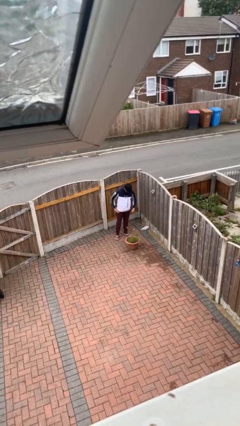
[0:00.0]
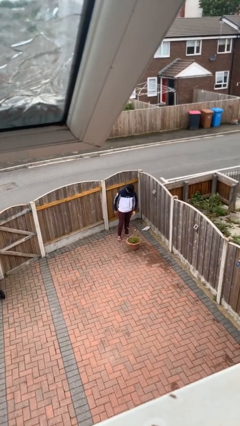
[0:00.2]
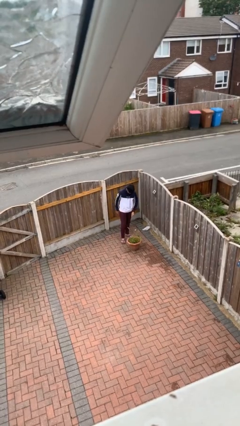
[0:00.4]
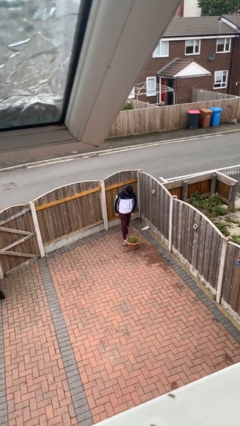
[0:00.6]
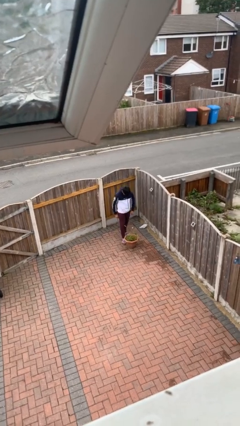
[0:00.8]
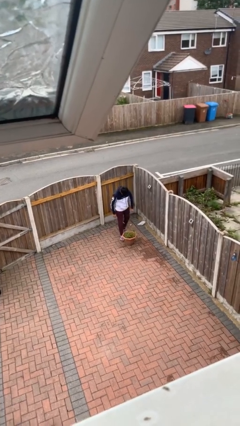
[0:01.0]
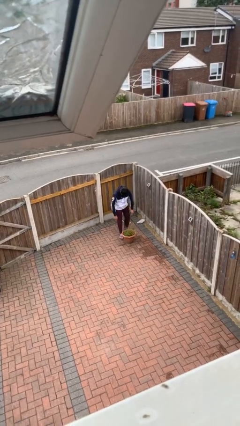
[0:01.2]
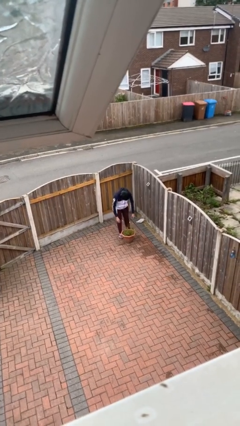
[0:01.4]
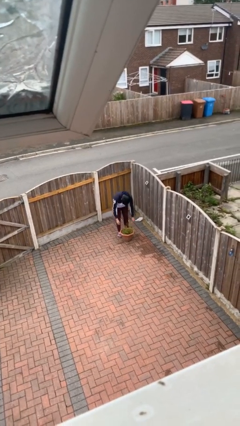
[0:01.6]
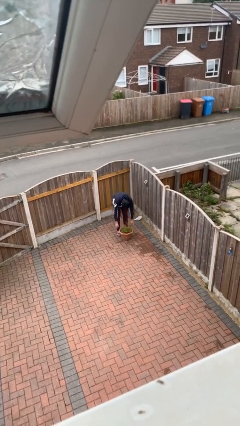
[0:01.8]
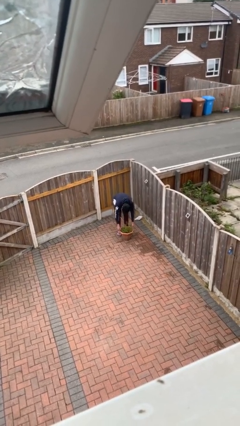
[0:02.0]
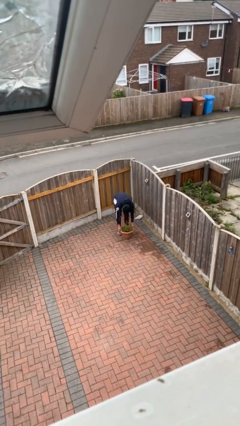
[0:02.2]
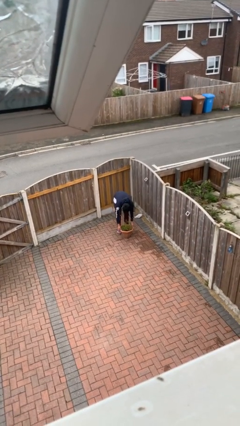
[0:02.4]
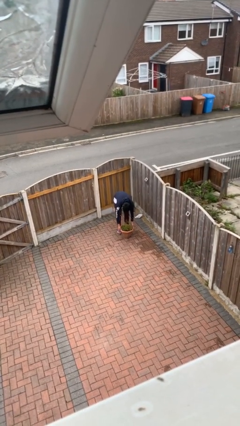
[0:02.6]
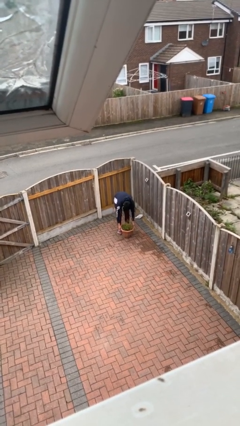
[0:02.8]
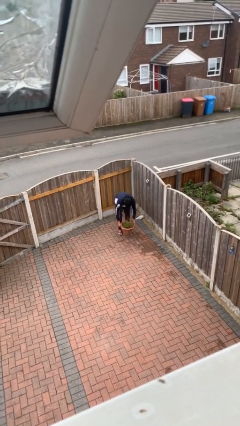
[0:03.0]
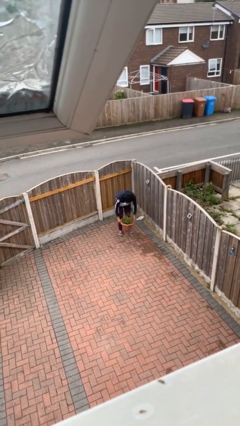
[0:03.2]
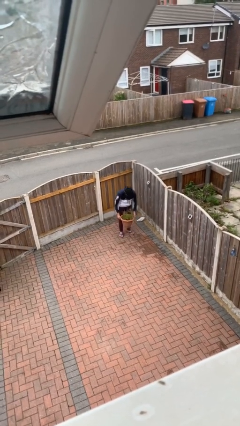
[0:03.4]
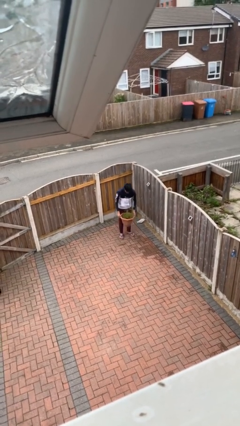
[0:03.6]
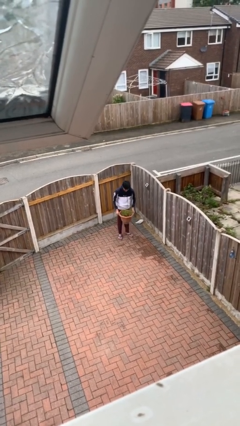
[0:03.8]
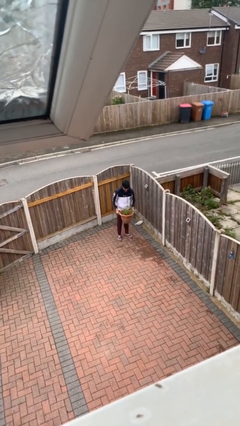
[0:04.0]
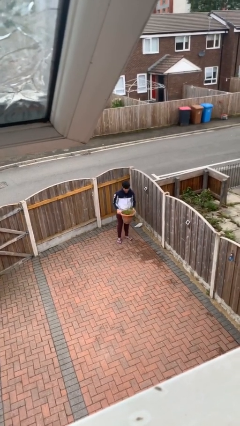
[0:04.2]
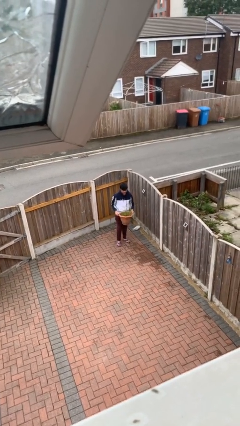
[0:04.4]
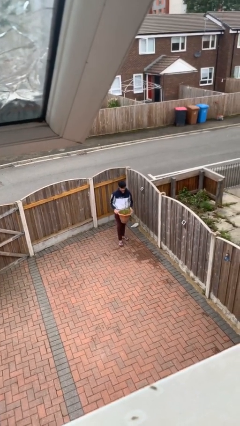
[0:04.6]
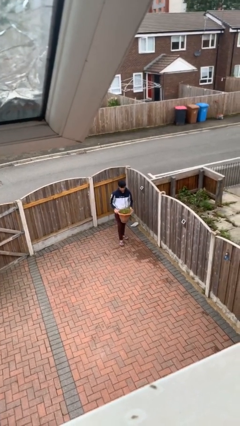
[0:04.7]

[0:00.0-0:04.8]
person picks up object from floor

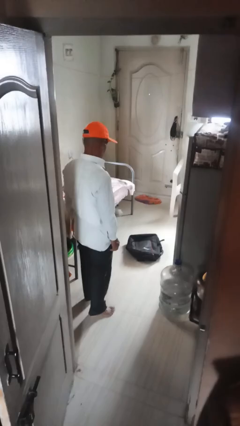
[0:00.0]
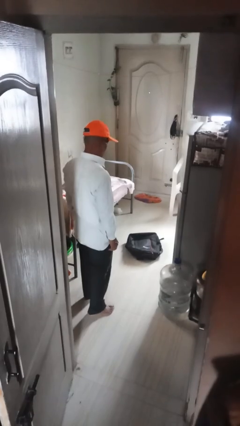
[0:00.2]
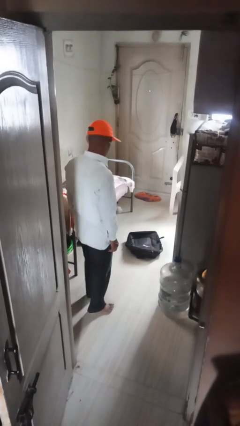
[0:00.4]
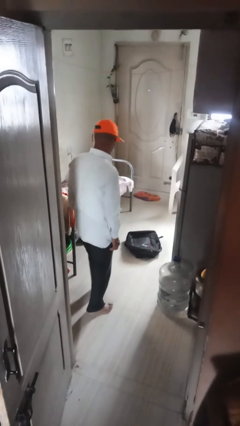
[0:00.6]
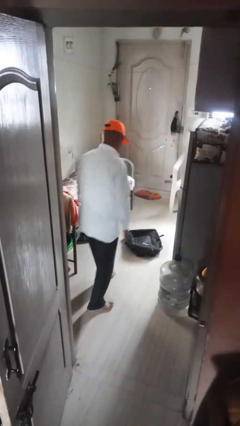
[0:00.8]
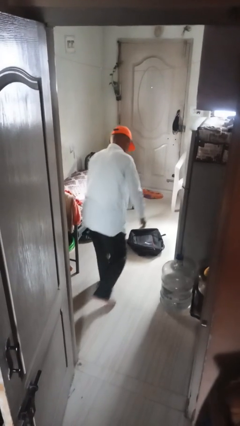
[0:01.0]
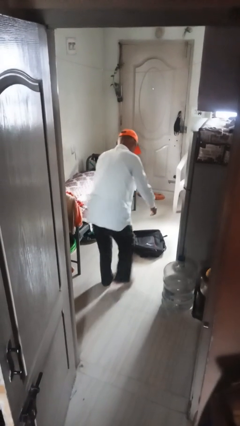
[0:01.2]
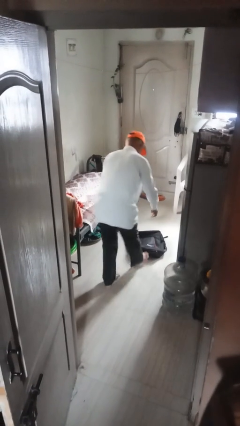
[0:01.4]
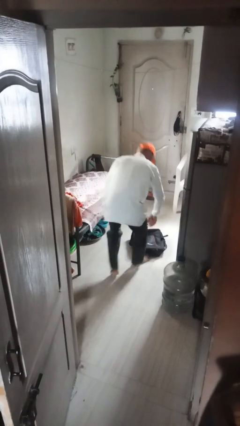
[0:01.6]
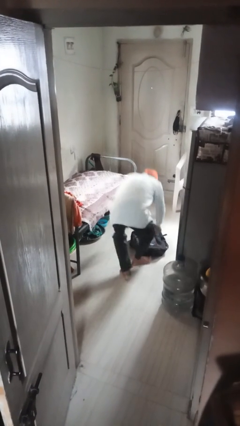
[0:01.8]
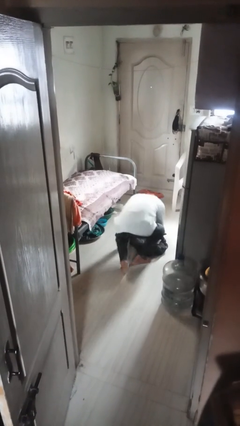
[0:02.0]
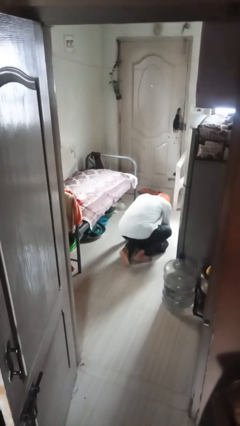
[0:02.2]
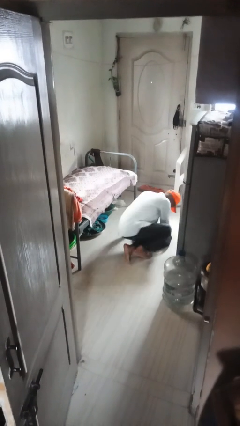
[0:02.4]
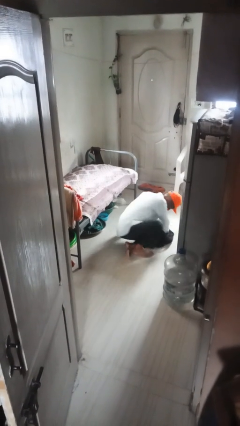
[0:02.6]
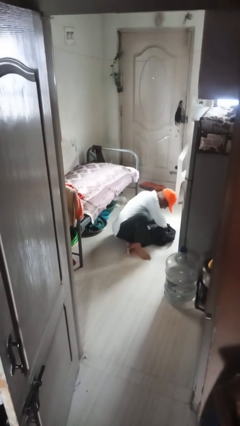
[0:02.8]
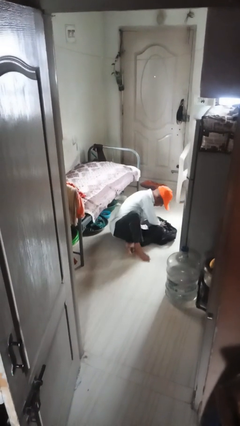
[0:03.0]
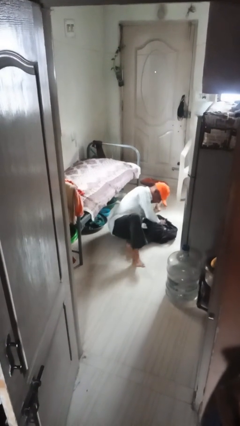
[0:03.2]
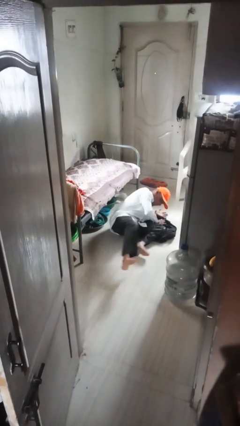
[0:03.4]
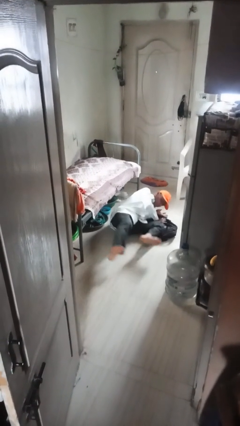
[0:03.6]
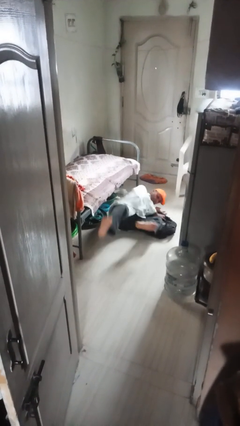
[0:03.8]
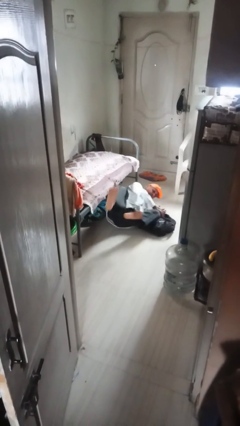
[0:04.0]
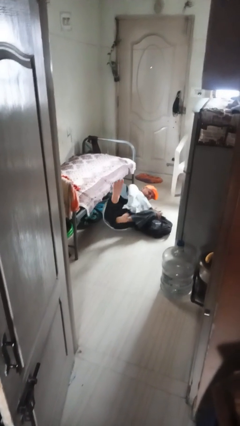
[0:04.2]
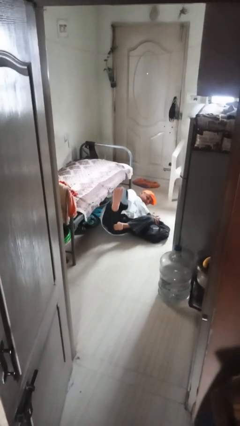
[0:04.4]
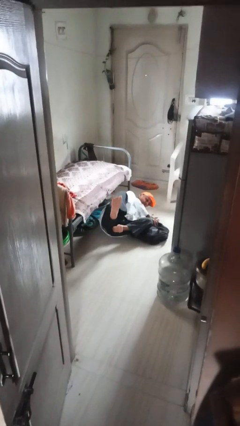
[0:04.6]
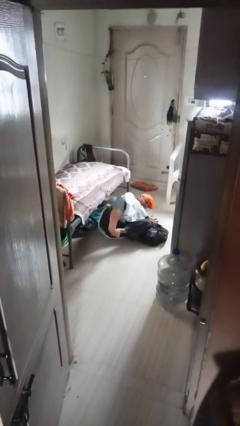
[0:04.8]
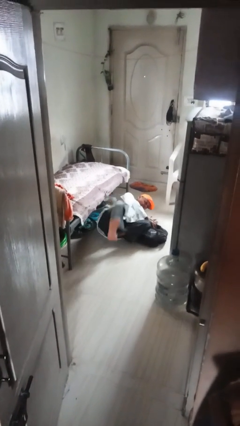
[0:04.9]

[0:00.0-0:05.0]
person trips on object on floor

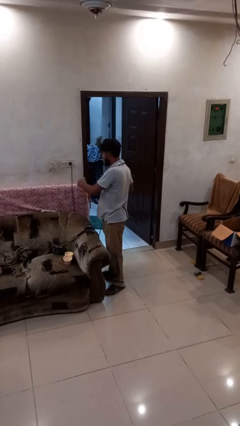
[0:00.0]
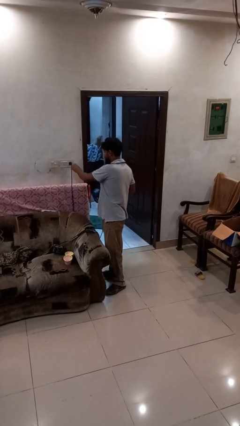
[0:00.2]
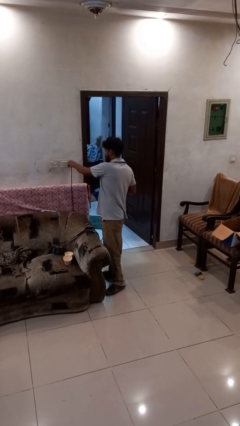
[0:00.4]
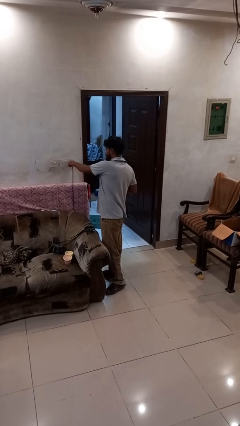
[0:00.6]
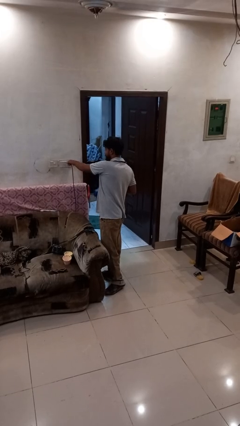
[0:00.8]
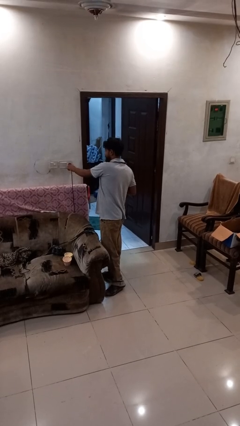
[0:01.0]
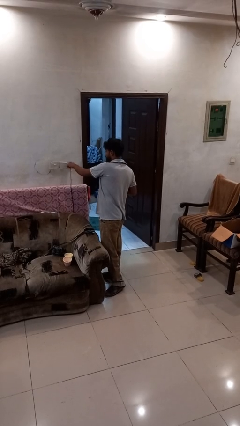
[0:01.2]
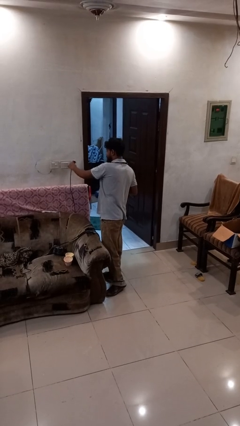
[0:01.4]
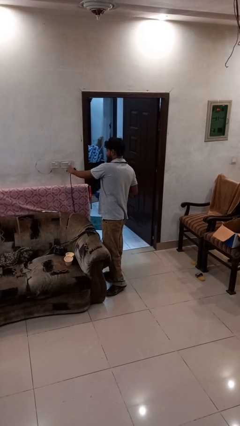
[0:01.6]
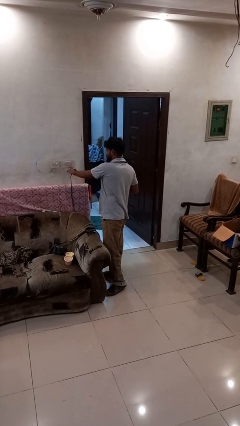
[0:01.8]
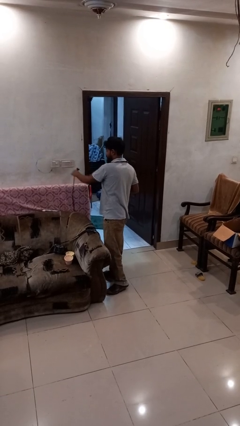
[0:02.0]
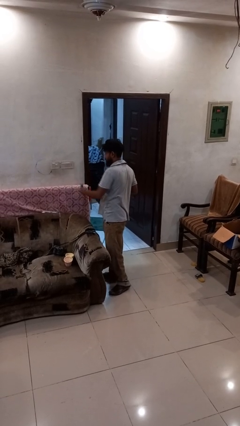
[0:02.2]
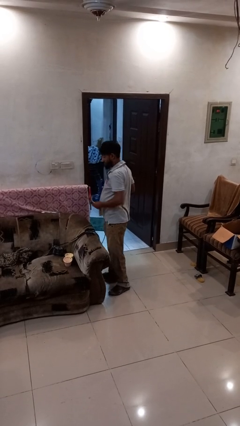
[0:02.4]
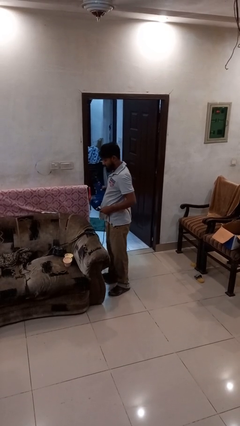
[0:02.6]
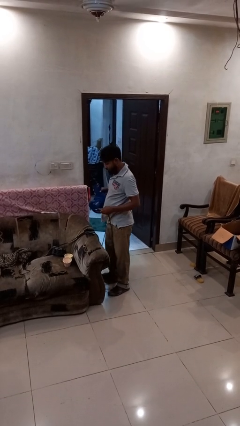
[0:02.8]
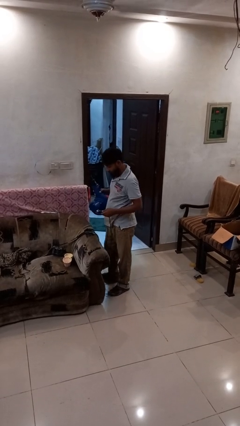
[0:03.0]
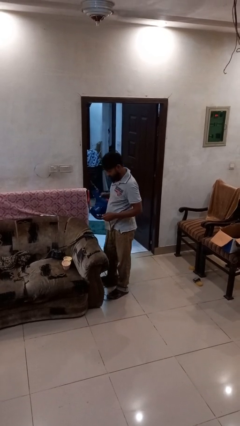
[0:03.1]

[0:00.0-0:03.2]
person unplugs from electrical socket

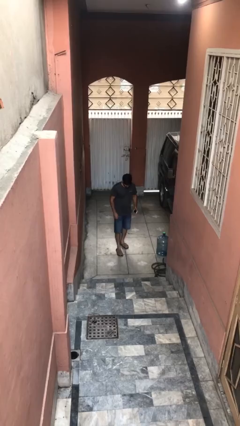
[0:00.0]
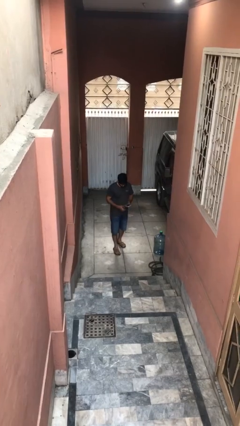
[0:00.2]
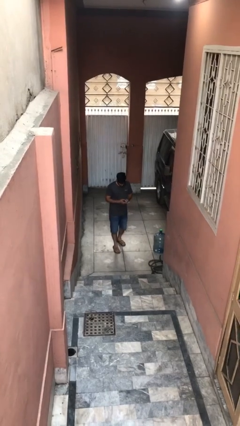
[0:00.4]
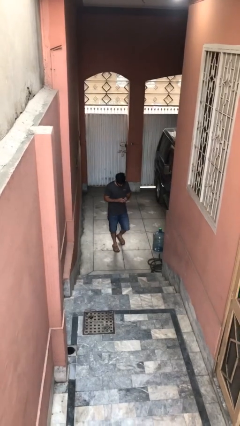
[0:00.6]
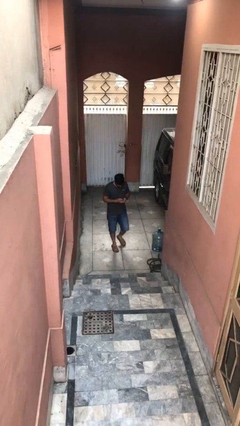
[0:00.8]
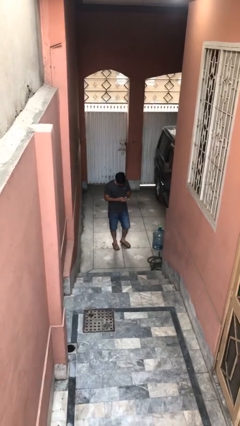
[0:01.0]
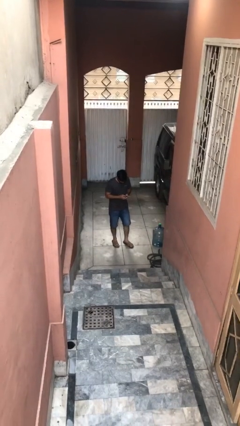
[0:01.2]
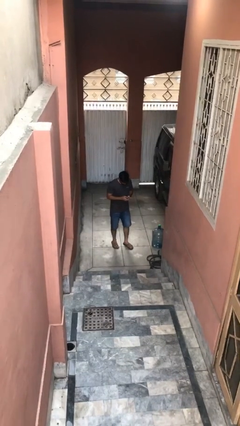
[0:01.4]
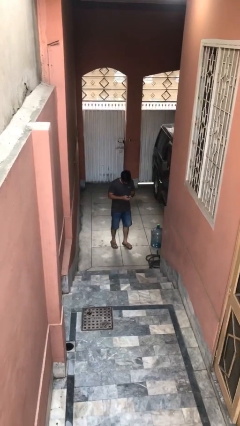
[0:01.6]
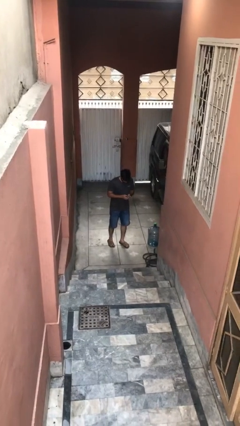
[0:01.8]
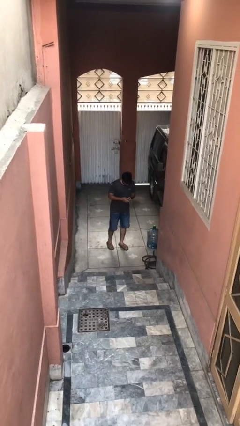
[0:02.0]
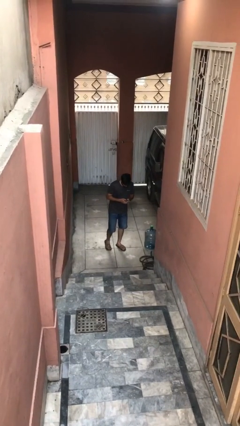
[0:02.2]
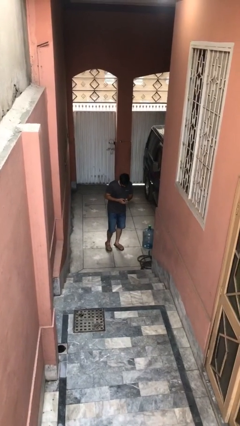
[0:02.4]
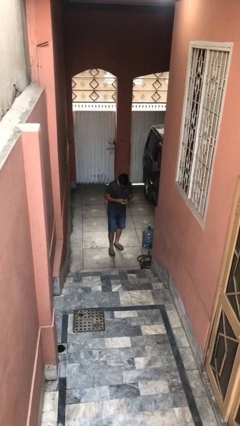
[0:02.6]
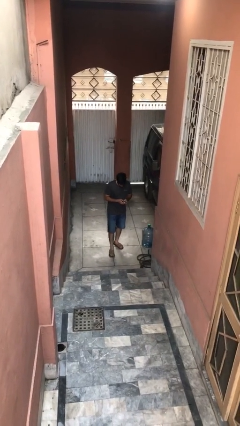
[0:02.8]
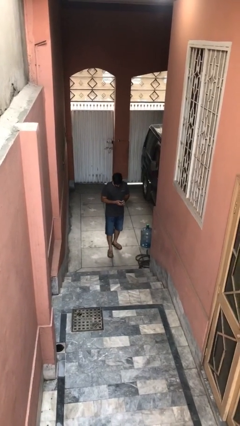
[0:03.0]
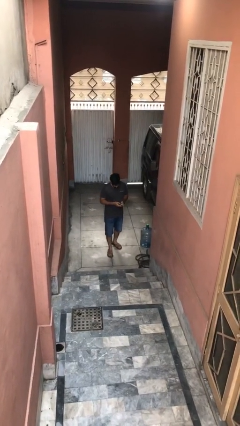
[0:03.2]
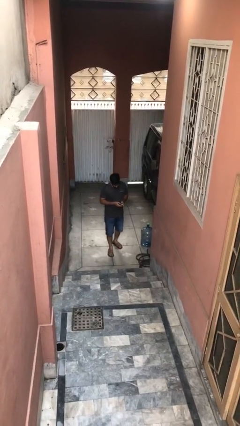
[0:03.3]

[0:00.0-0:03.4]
person texts on phone

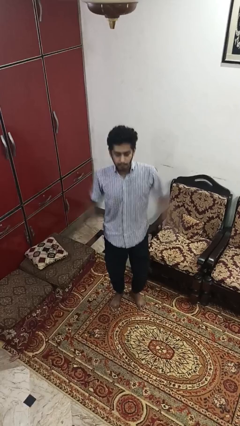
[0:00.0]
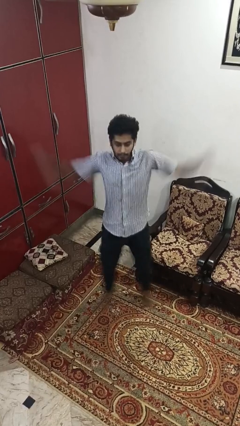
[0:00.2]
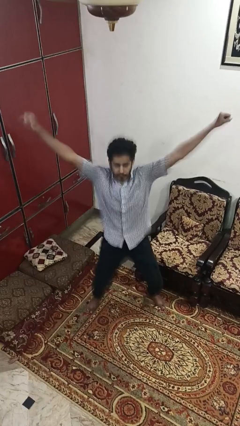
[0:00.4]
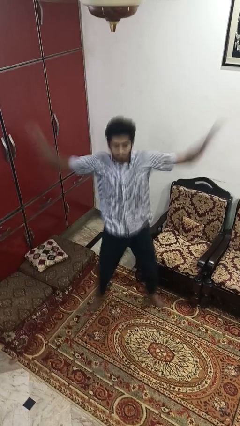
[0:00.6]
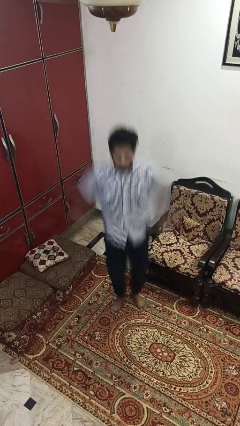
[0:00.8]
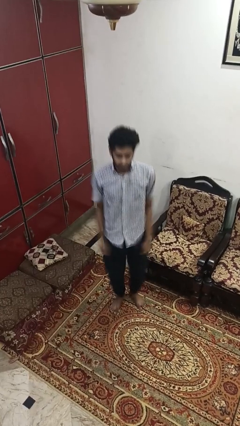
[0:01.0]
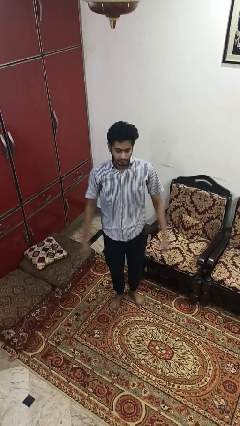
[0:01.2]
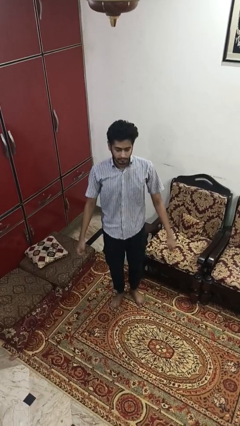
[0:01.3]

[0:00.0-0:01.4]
person exercises with jumping jacks

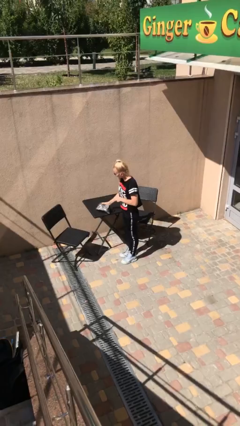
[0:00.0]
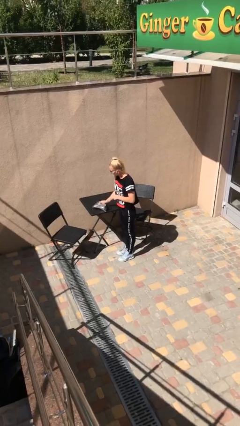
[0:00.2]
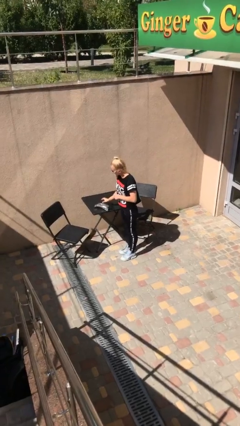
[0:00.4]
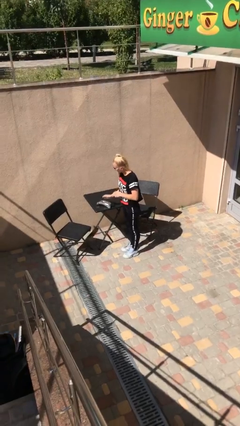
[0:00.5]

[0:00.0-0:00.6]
person puts down object on table
